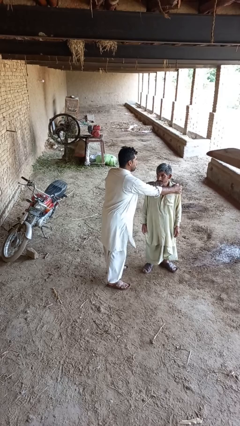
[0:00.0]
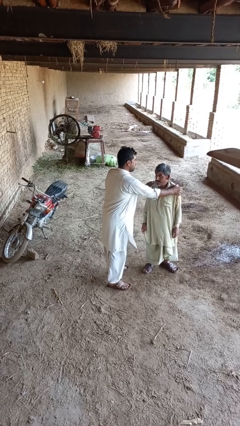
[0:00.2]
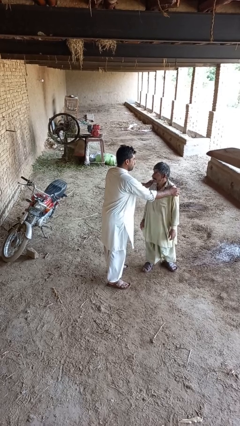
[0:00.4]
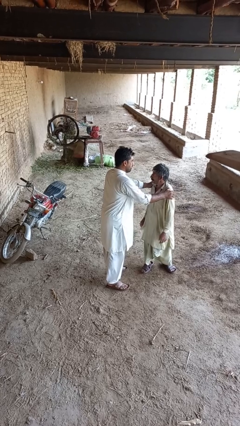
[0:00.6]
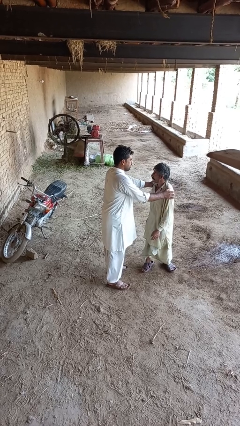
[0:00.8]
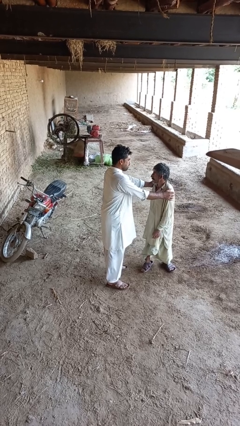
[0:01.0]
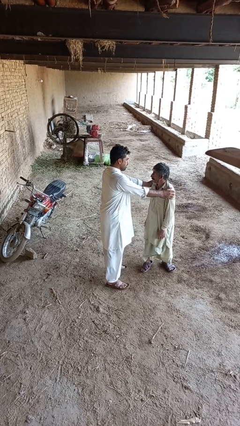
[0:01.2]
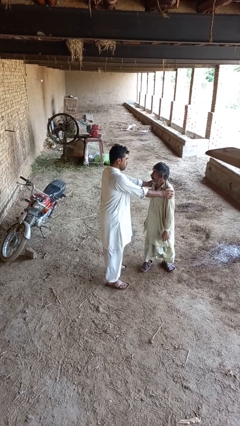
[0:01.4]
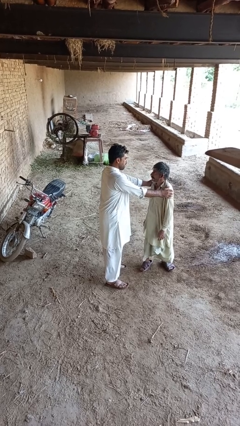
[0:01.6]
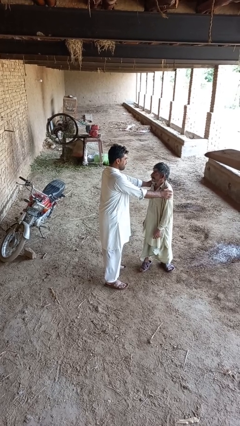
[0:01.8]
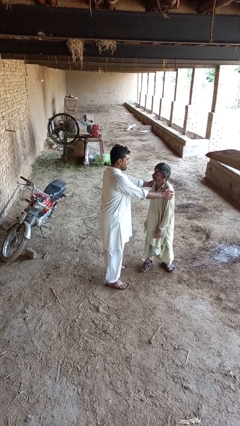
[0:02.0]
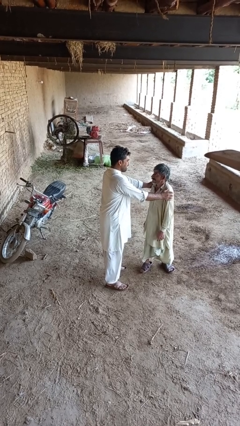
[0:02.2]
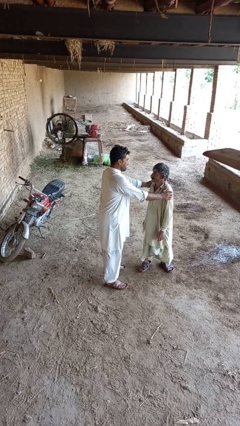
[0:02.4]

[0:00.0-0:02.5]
person spins person around

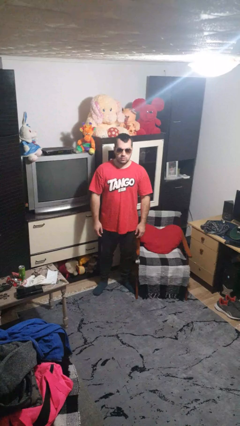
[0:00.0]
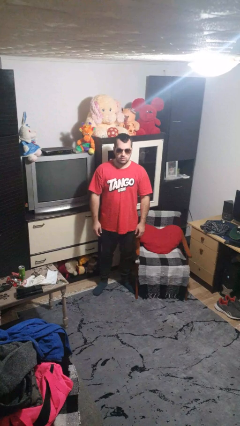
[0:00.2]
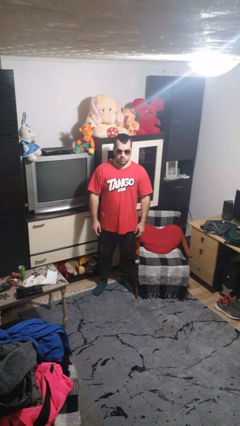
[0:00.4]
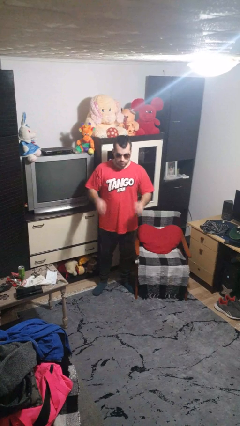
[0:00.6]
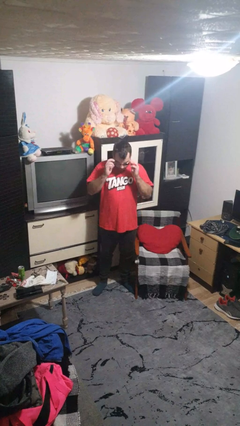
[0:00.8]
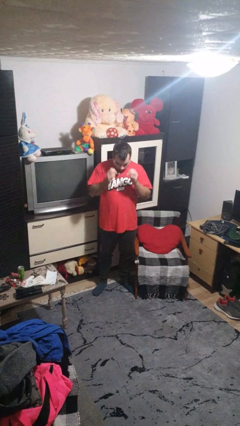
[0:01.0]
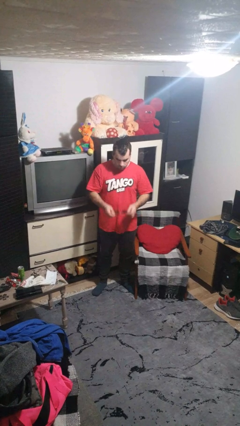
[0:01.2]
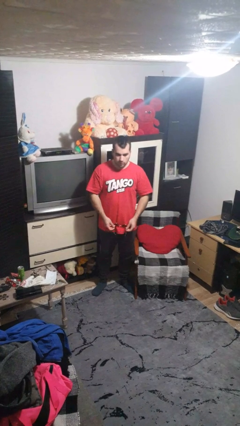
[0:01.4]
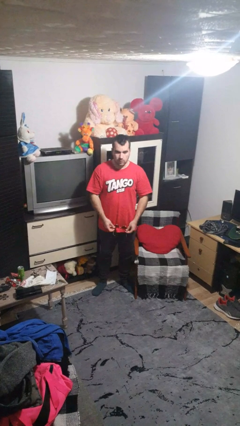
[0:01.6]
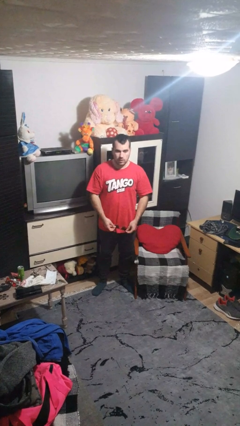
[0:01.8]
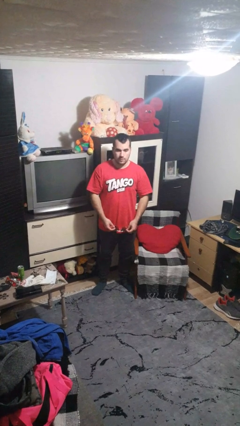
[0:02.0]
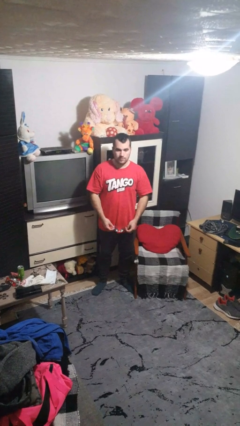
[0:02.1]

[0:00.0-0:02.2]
person takes off sunglasses

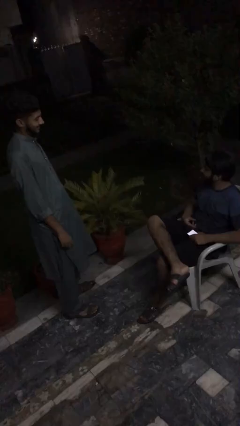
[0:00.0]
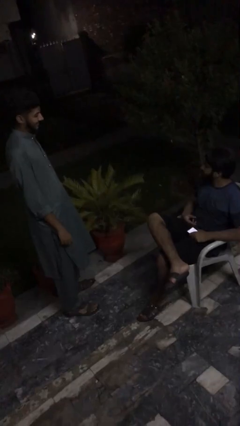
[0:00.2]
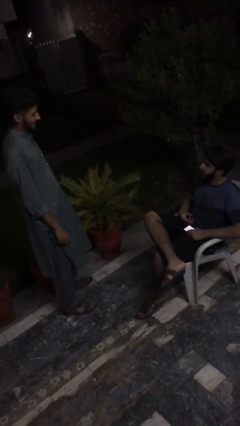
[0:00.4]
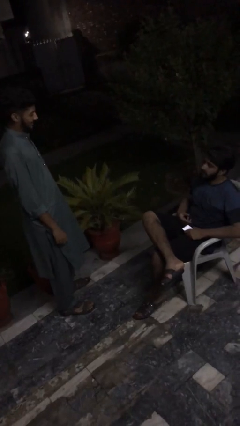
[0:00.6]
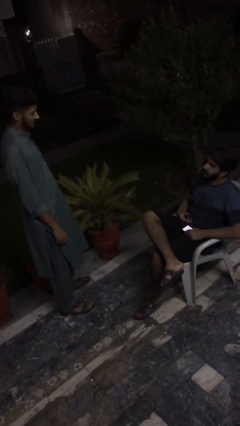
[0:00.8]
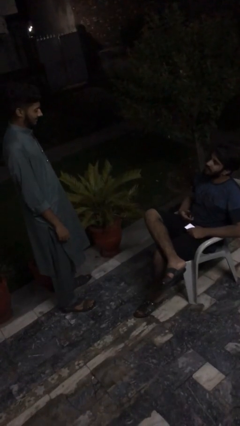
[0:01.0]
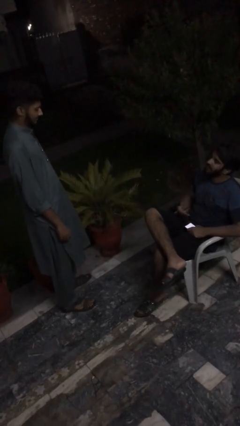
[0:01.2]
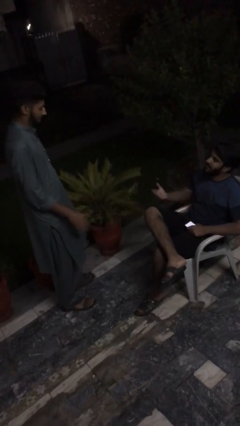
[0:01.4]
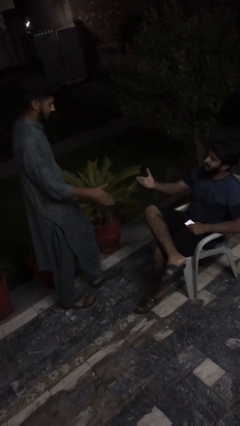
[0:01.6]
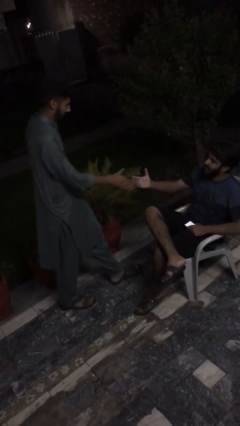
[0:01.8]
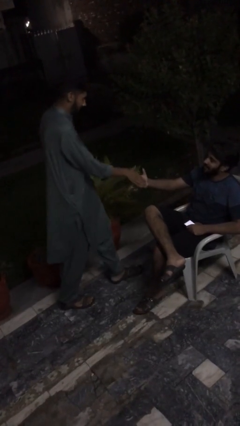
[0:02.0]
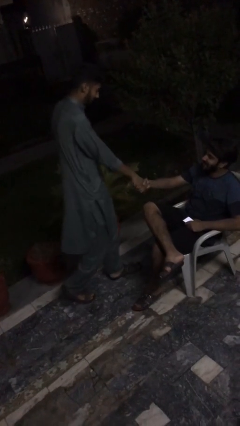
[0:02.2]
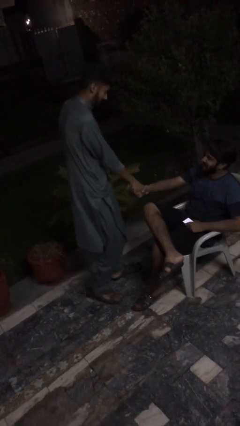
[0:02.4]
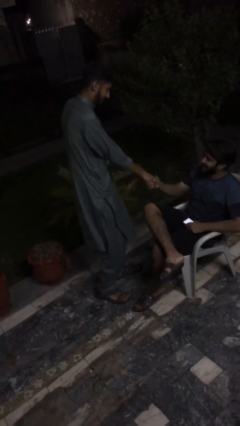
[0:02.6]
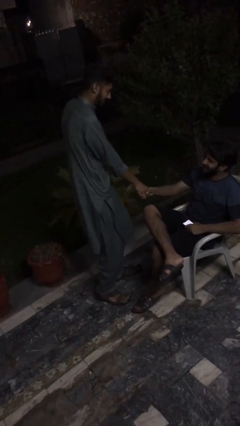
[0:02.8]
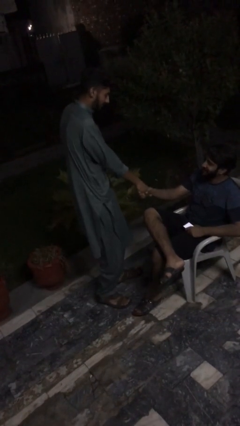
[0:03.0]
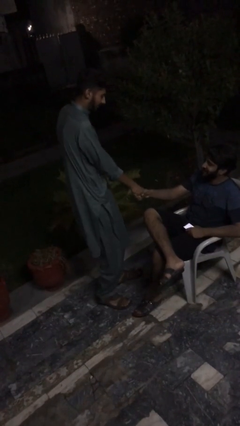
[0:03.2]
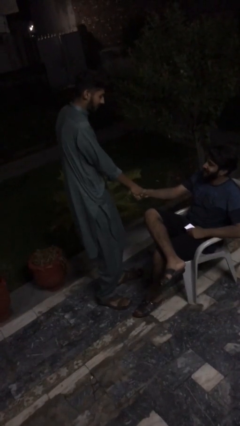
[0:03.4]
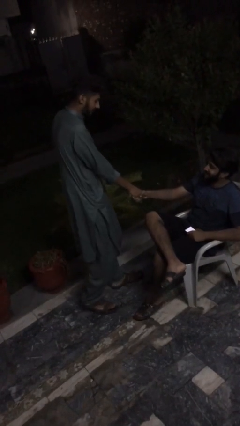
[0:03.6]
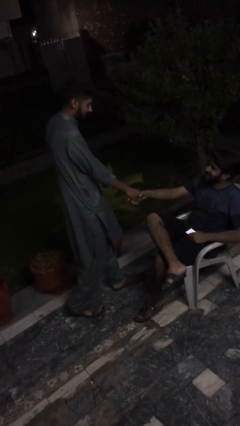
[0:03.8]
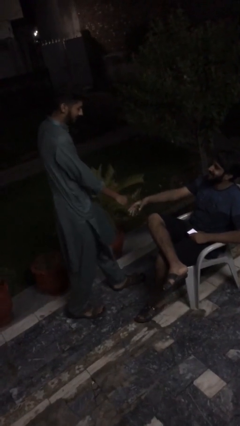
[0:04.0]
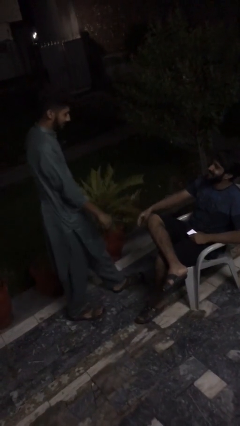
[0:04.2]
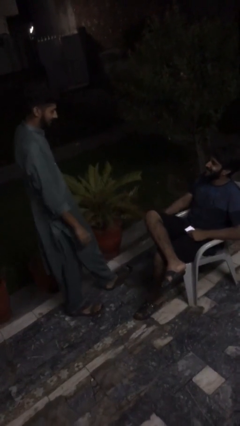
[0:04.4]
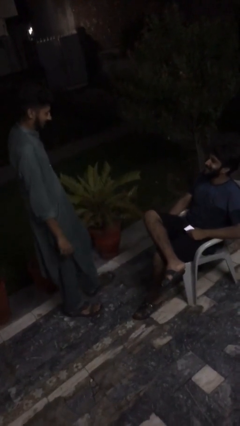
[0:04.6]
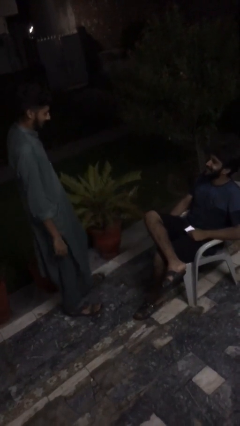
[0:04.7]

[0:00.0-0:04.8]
person shakes hand

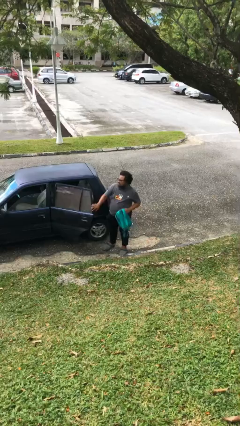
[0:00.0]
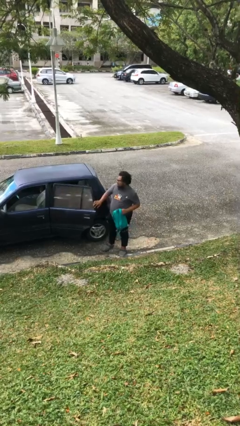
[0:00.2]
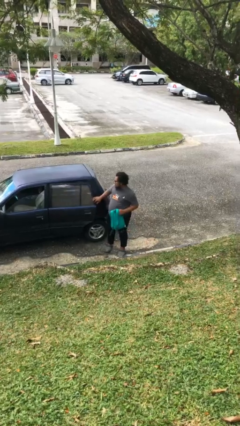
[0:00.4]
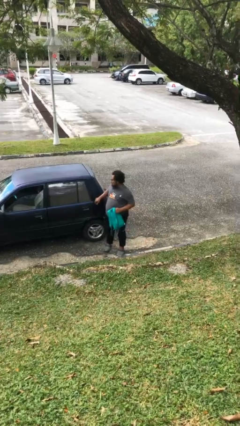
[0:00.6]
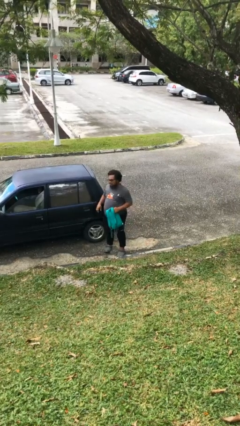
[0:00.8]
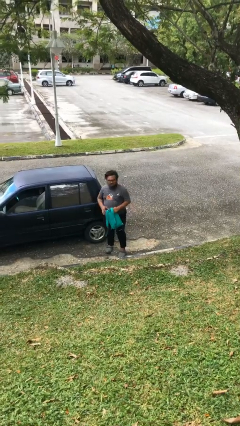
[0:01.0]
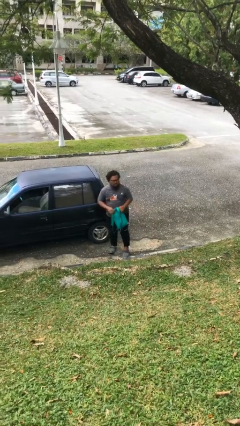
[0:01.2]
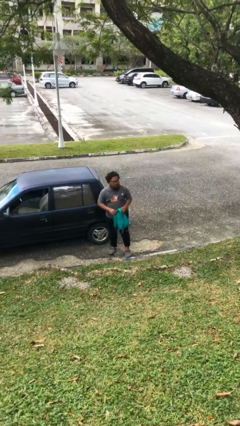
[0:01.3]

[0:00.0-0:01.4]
person closes car door

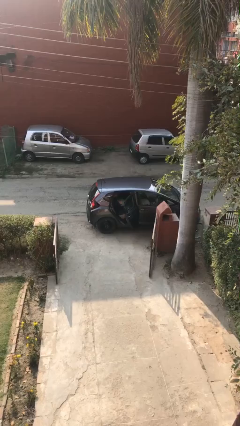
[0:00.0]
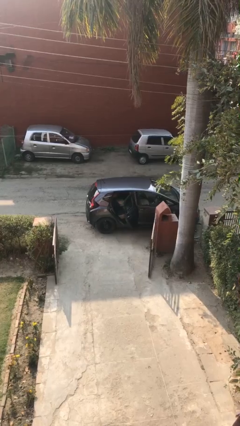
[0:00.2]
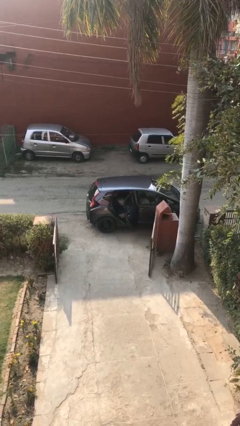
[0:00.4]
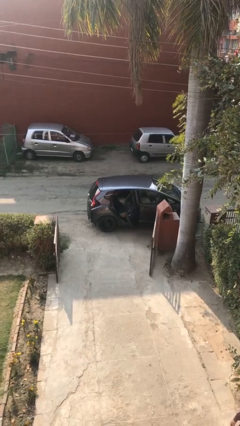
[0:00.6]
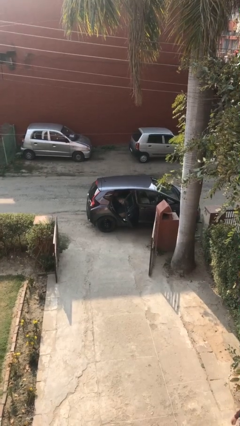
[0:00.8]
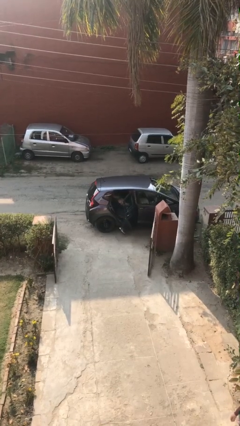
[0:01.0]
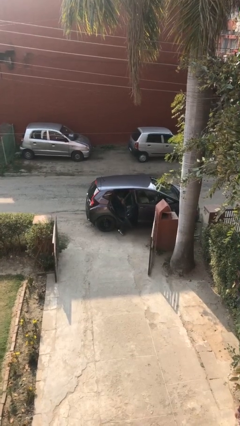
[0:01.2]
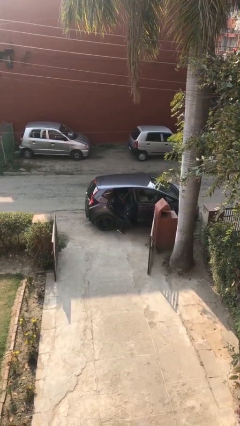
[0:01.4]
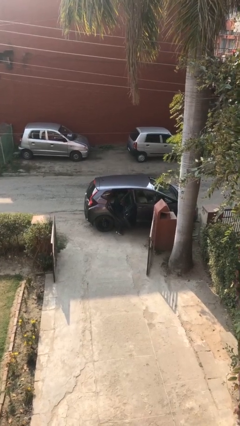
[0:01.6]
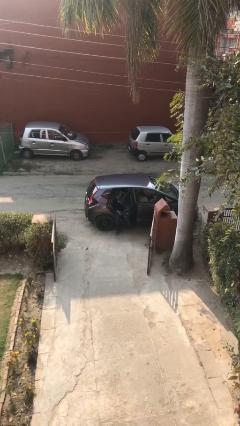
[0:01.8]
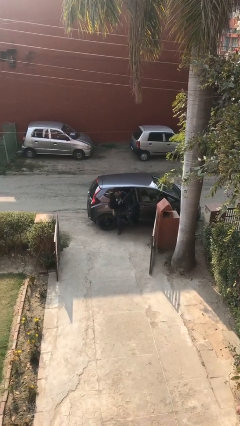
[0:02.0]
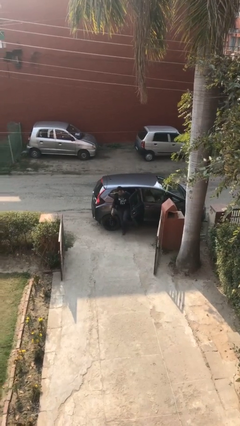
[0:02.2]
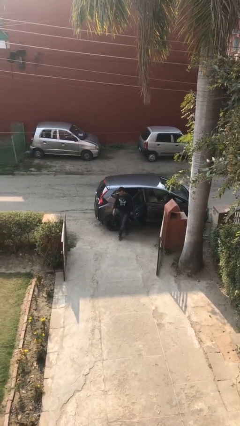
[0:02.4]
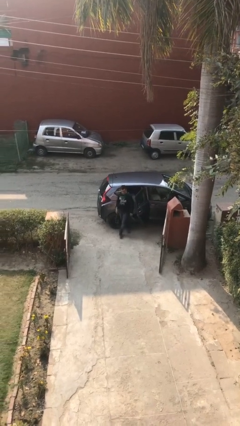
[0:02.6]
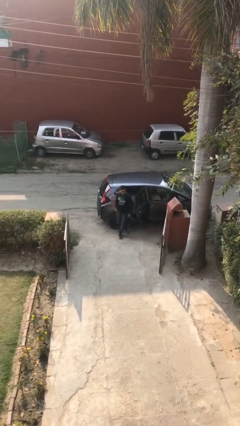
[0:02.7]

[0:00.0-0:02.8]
person exits car

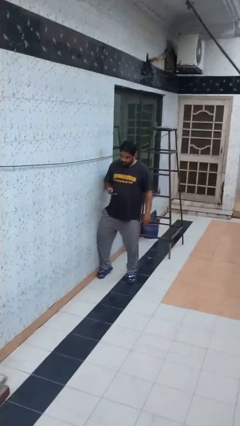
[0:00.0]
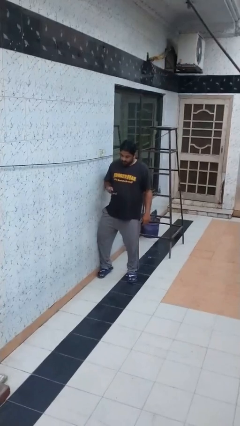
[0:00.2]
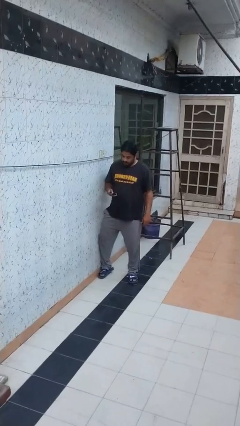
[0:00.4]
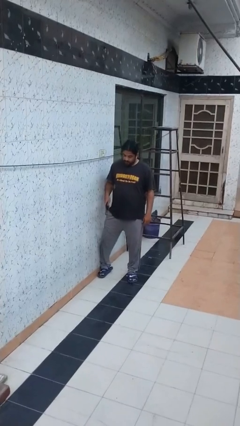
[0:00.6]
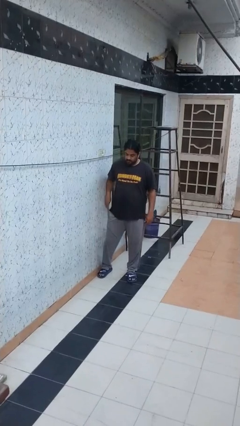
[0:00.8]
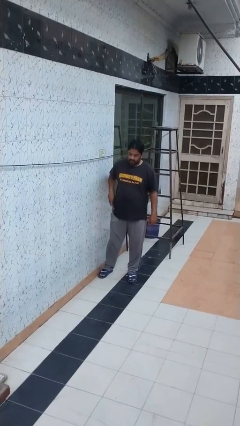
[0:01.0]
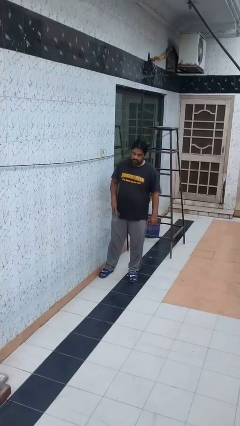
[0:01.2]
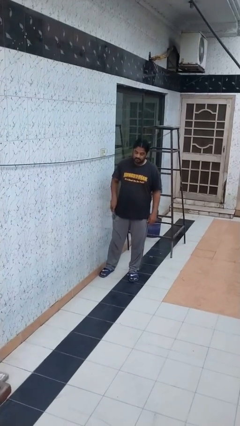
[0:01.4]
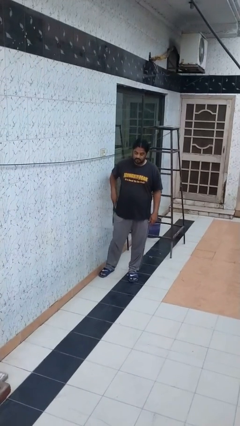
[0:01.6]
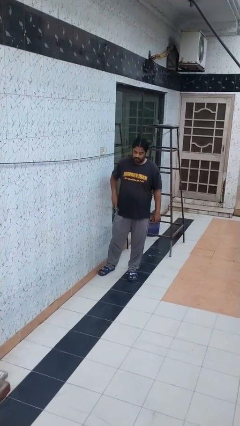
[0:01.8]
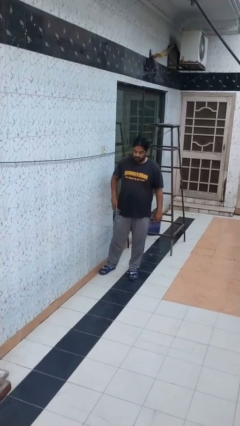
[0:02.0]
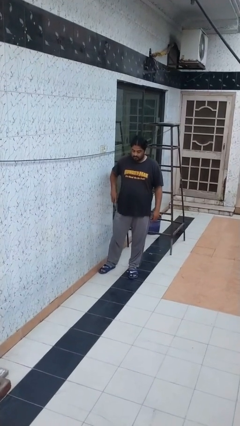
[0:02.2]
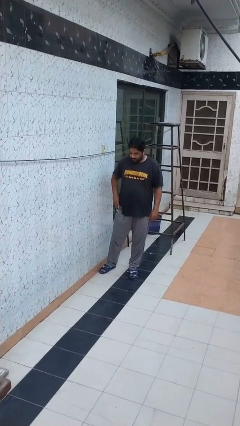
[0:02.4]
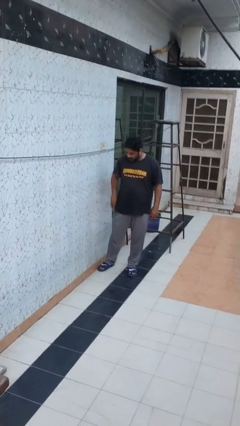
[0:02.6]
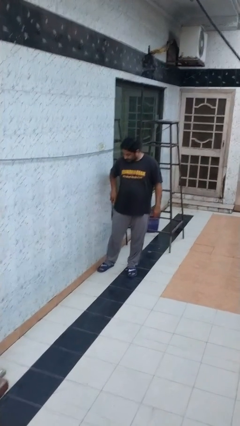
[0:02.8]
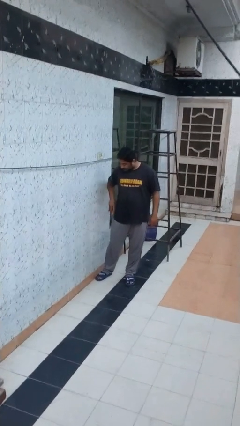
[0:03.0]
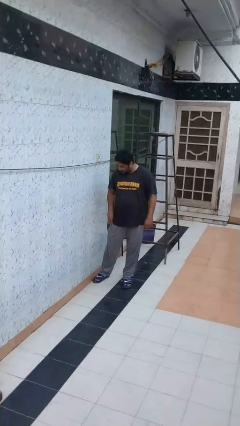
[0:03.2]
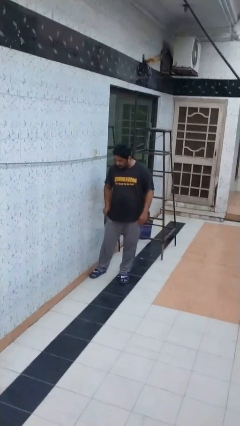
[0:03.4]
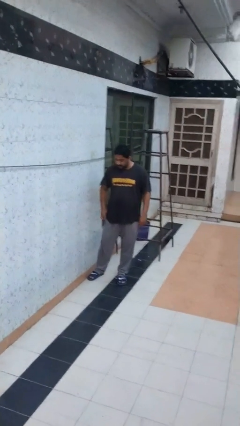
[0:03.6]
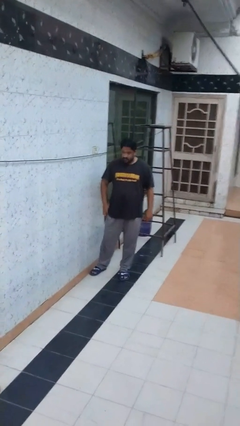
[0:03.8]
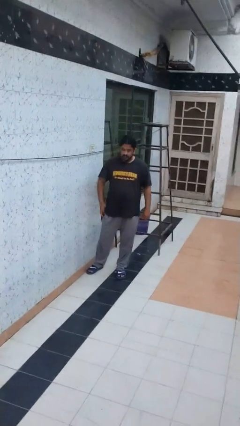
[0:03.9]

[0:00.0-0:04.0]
person puts phone into pocket
